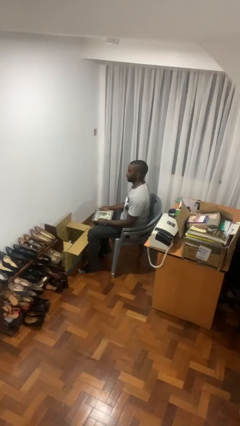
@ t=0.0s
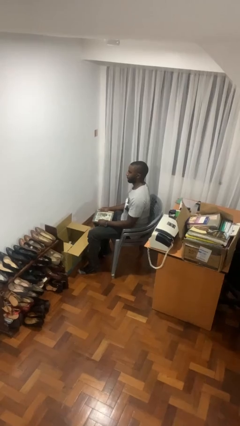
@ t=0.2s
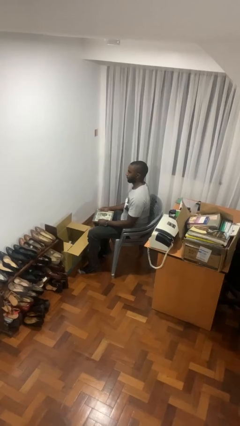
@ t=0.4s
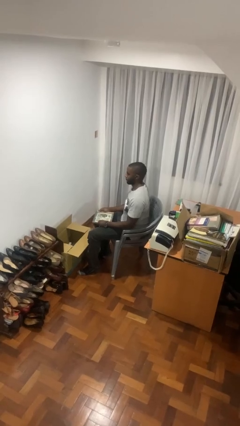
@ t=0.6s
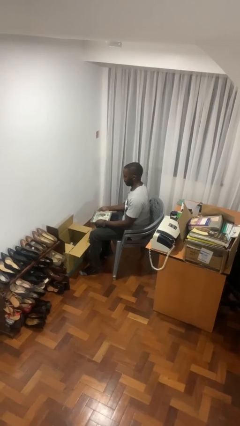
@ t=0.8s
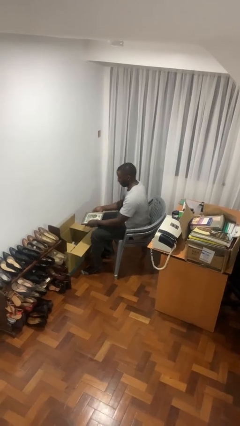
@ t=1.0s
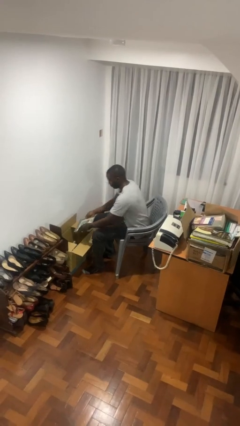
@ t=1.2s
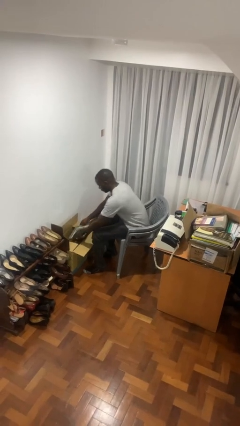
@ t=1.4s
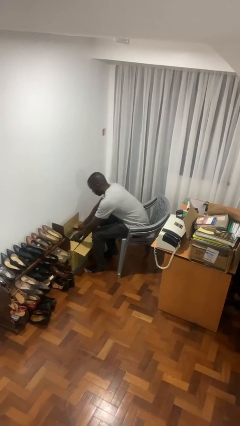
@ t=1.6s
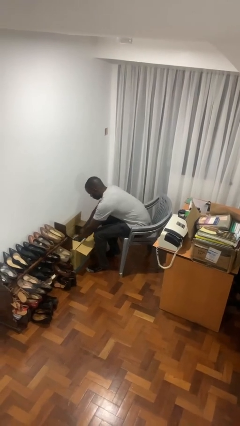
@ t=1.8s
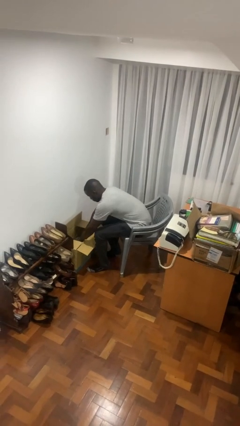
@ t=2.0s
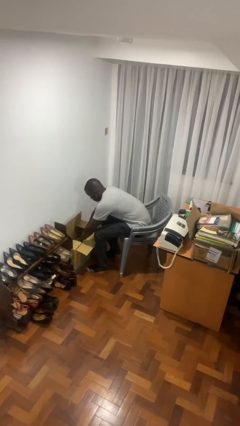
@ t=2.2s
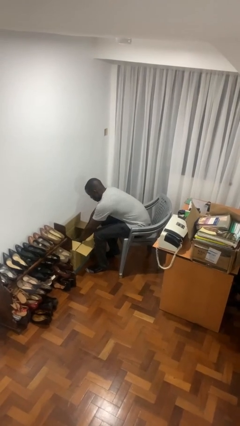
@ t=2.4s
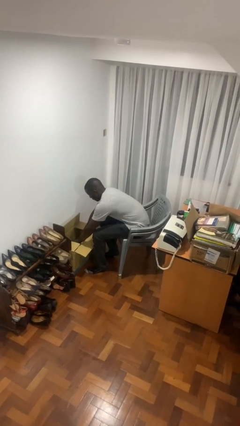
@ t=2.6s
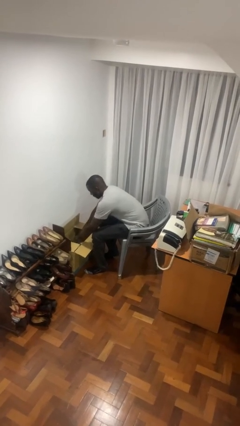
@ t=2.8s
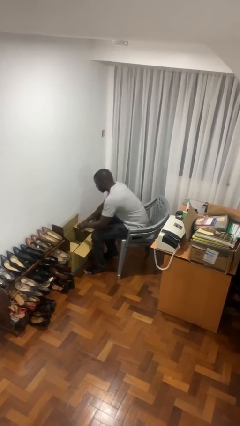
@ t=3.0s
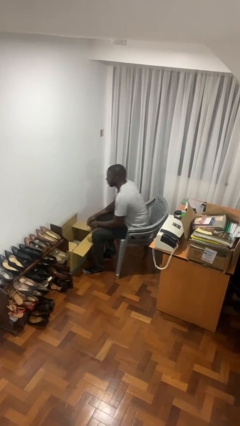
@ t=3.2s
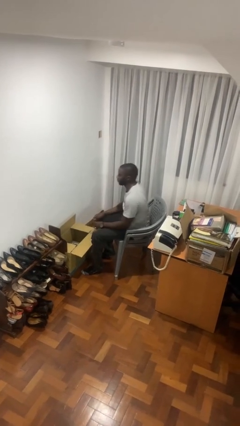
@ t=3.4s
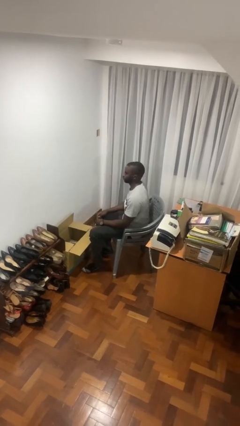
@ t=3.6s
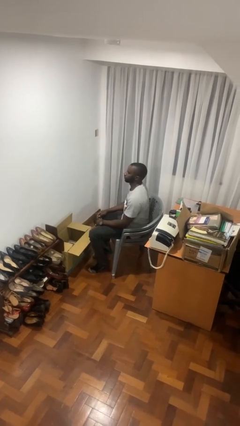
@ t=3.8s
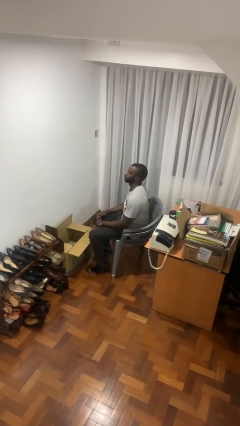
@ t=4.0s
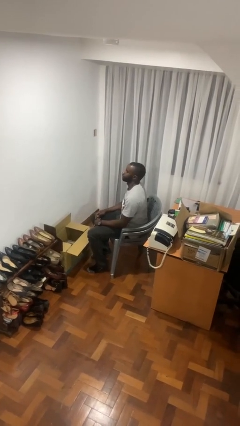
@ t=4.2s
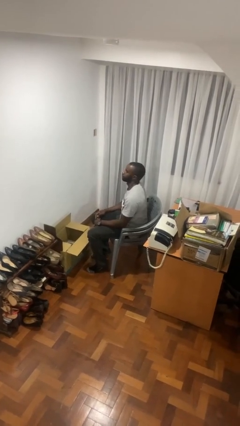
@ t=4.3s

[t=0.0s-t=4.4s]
person puts object into box

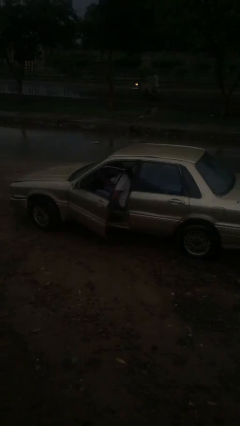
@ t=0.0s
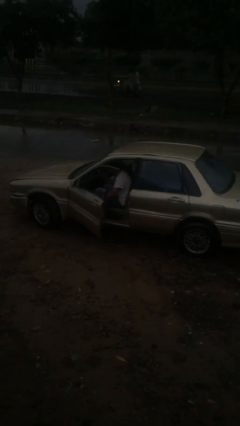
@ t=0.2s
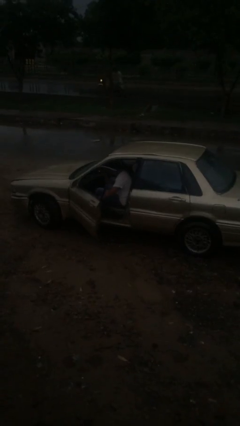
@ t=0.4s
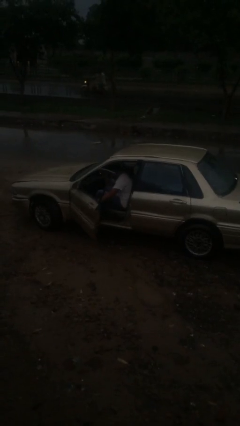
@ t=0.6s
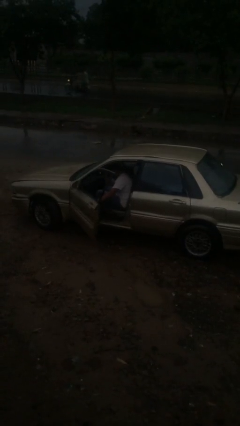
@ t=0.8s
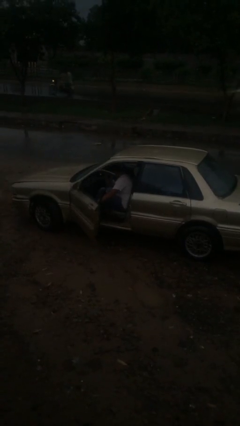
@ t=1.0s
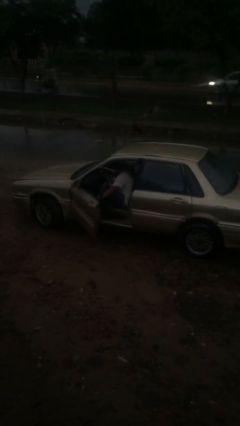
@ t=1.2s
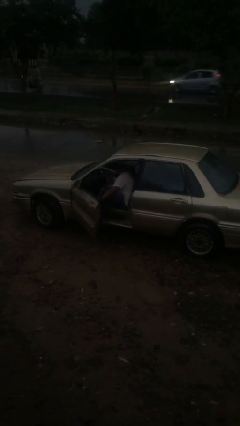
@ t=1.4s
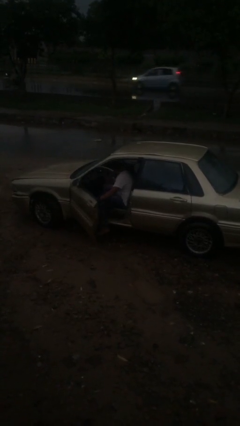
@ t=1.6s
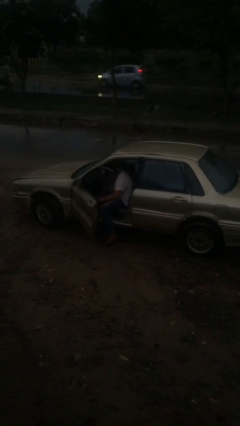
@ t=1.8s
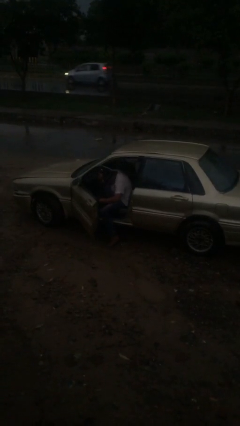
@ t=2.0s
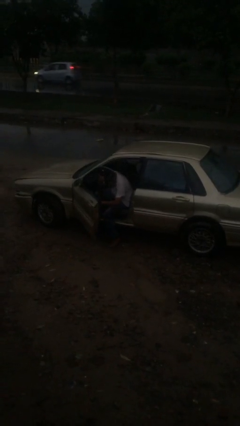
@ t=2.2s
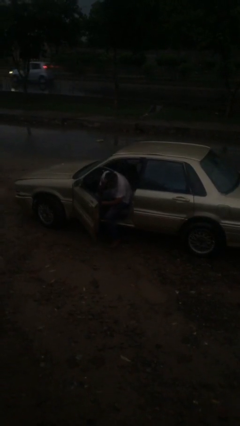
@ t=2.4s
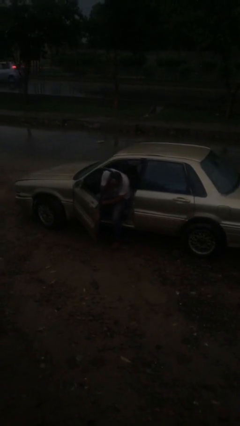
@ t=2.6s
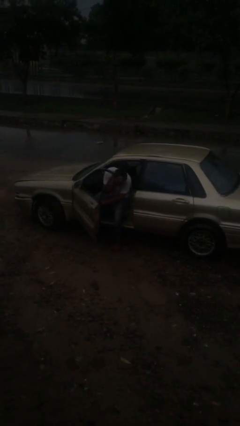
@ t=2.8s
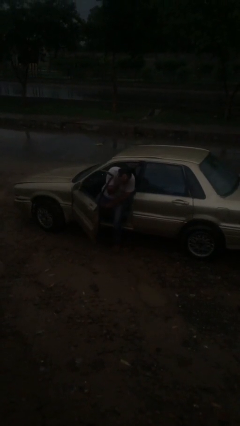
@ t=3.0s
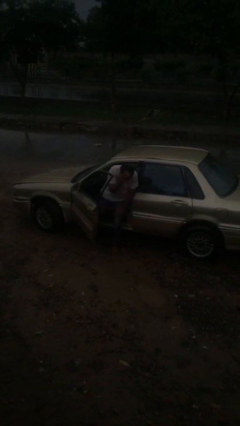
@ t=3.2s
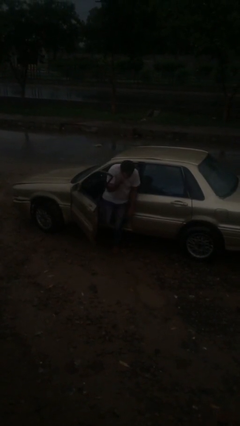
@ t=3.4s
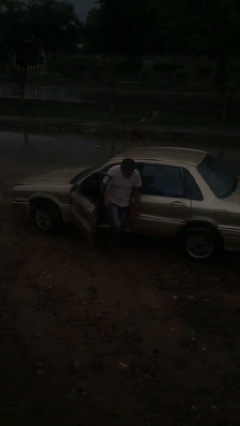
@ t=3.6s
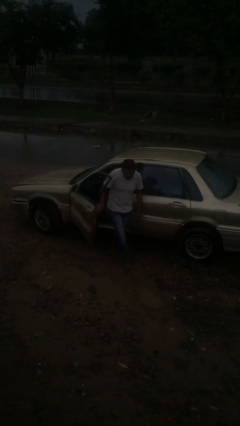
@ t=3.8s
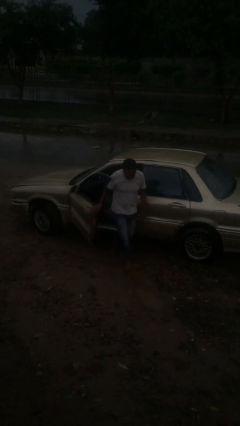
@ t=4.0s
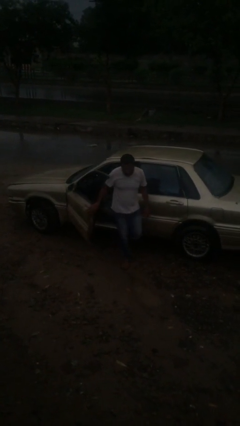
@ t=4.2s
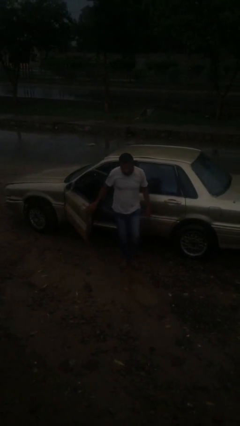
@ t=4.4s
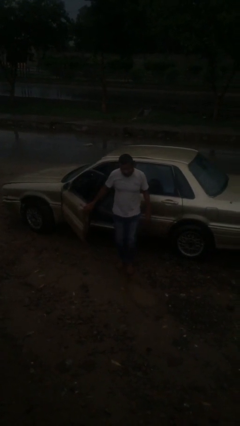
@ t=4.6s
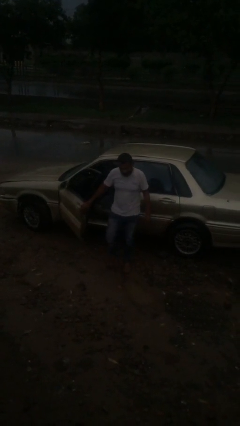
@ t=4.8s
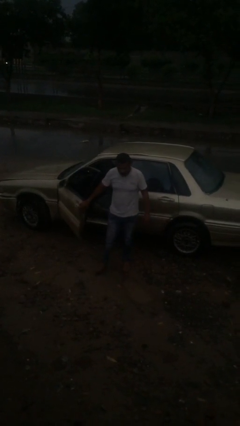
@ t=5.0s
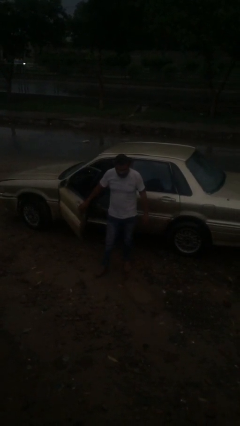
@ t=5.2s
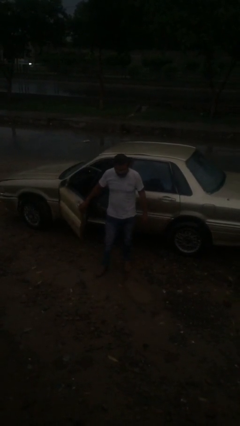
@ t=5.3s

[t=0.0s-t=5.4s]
person exits car

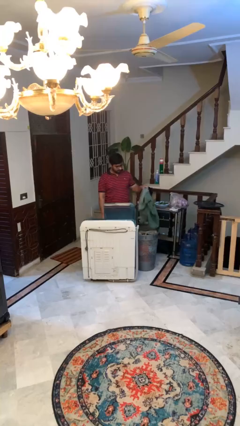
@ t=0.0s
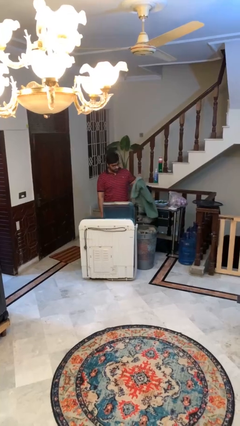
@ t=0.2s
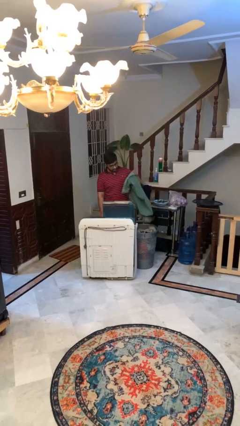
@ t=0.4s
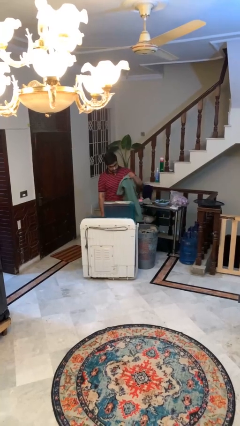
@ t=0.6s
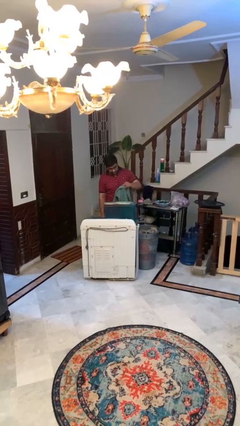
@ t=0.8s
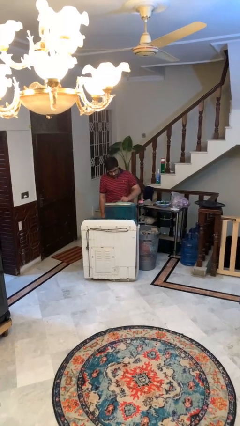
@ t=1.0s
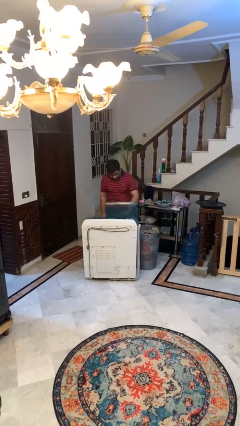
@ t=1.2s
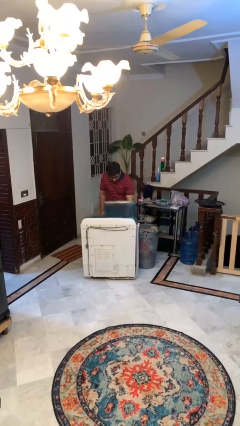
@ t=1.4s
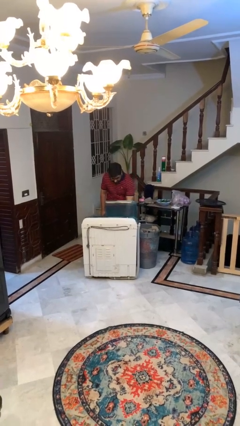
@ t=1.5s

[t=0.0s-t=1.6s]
person loads clotheswasher

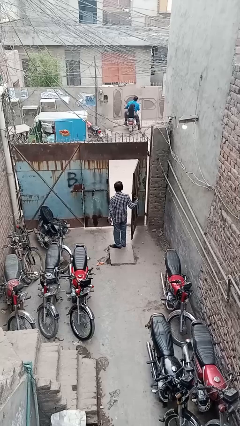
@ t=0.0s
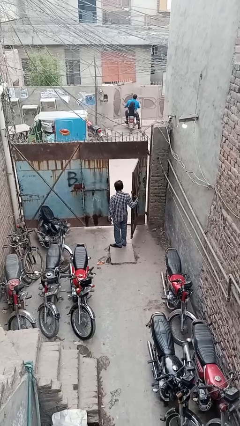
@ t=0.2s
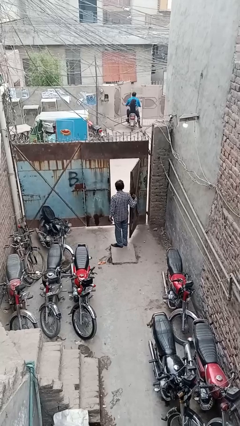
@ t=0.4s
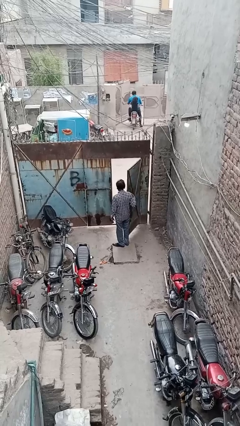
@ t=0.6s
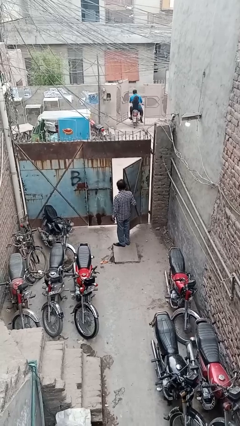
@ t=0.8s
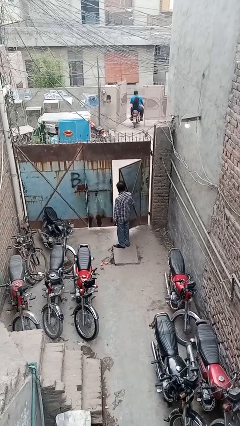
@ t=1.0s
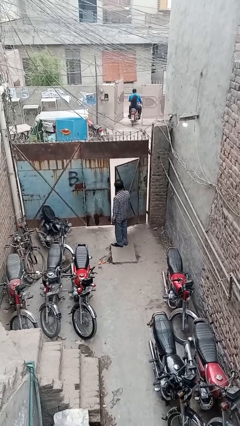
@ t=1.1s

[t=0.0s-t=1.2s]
person closes facility door

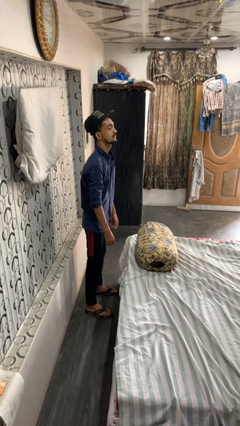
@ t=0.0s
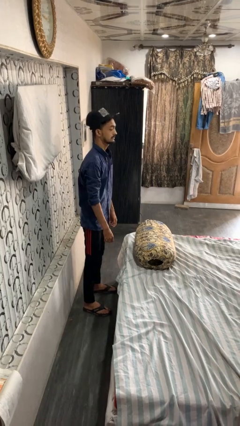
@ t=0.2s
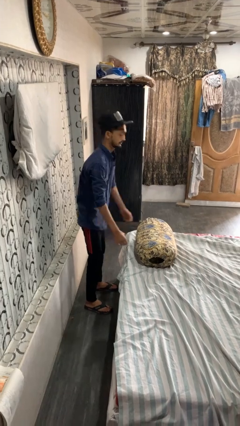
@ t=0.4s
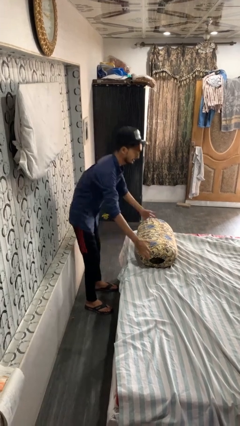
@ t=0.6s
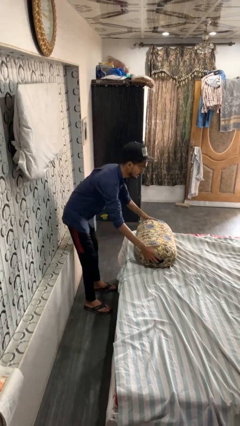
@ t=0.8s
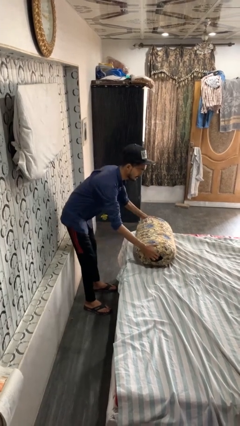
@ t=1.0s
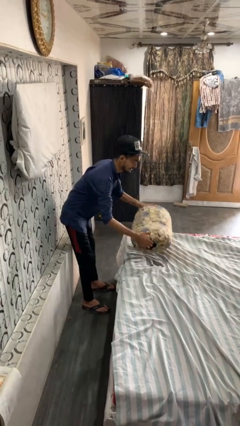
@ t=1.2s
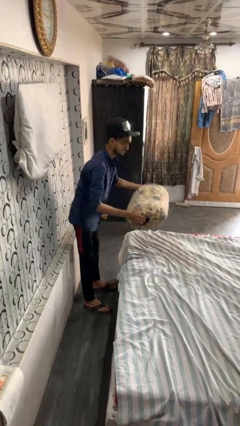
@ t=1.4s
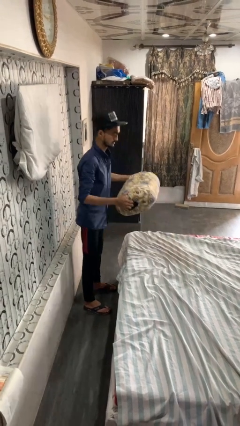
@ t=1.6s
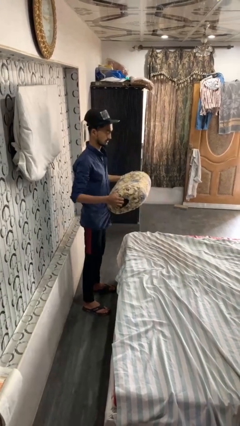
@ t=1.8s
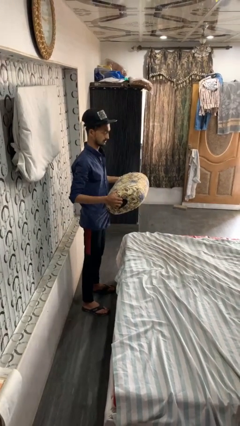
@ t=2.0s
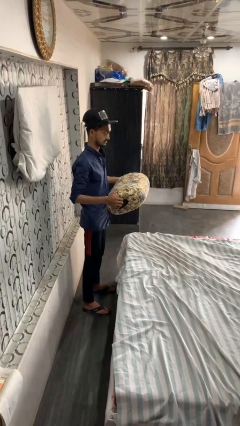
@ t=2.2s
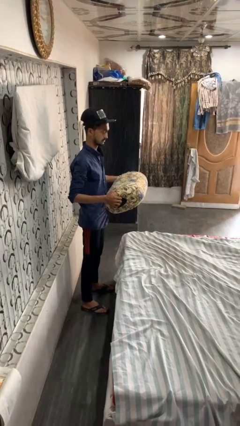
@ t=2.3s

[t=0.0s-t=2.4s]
person picks up object from bed

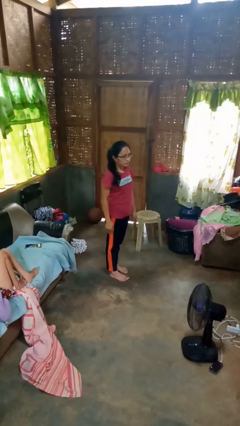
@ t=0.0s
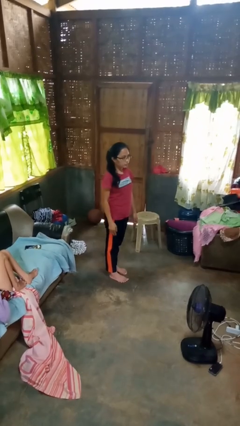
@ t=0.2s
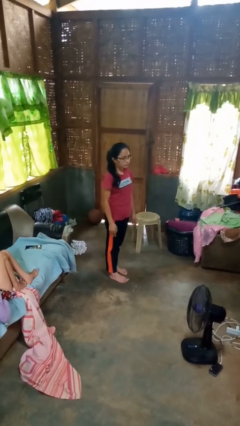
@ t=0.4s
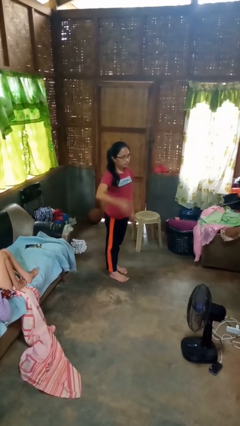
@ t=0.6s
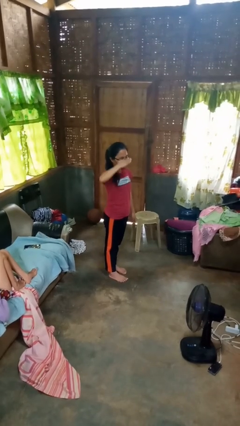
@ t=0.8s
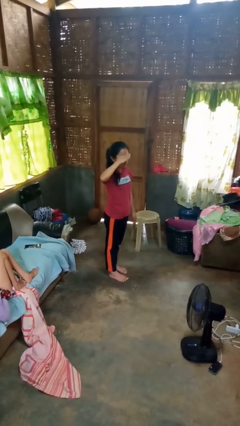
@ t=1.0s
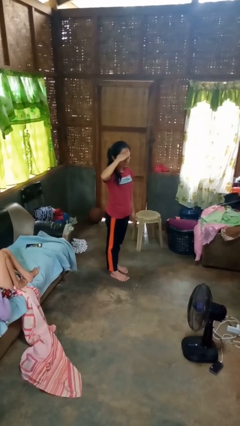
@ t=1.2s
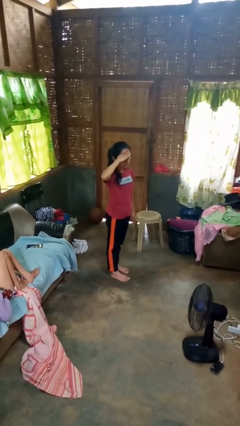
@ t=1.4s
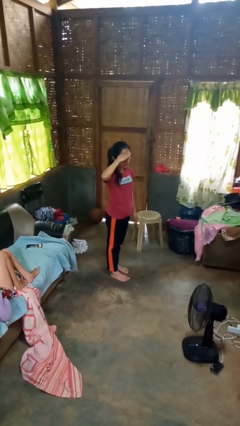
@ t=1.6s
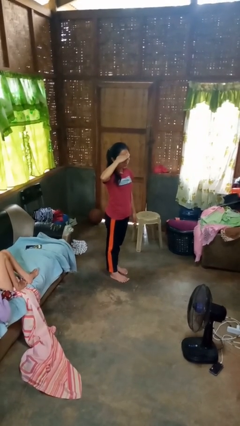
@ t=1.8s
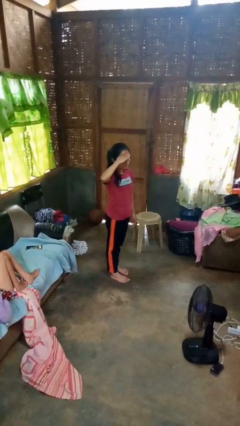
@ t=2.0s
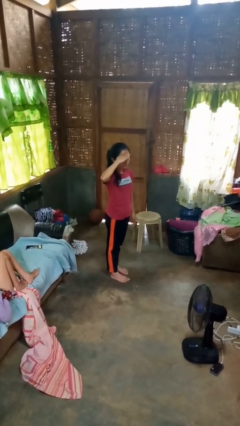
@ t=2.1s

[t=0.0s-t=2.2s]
person salutes
